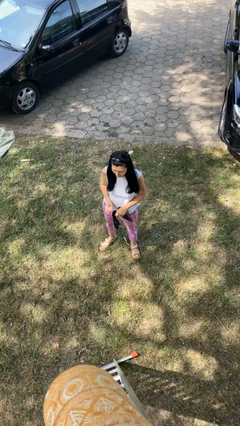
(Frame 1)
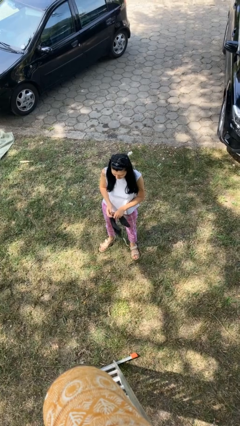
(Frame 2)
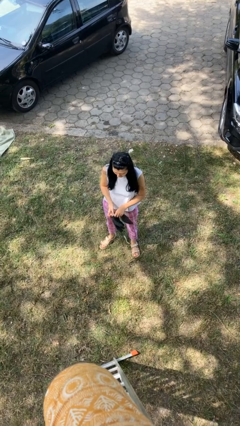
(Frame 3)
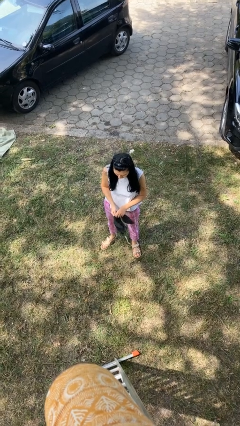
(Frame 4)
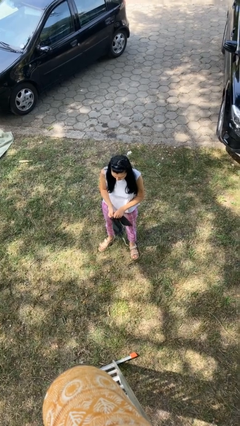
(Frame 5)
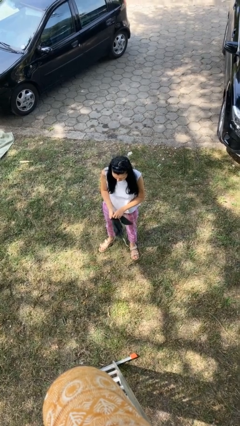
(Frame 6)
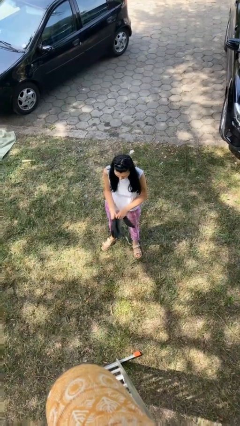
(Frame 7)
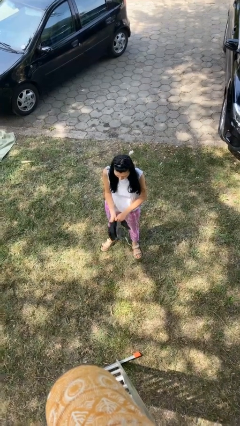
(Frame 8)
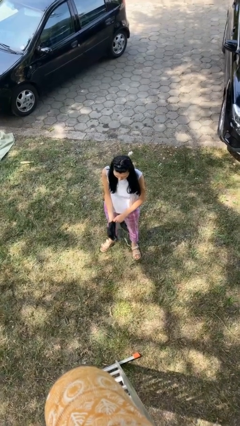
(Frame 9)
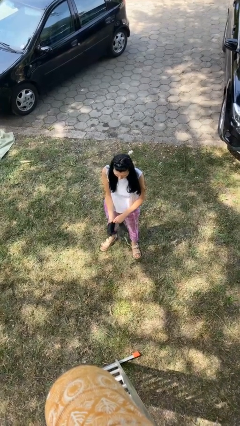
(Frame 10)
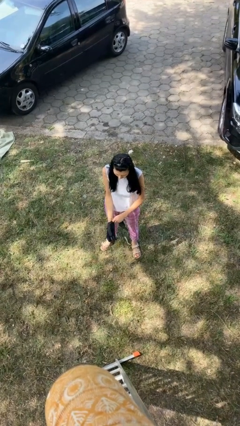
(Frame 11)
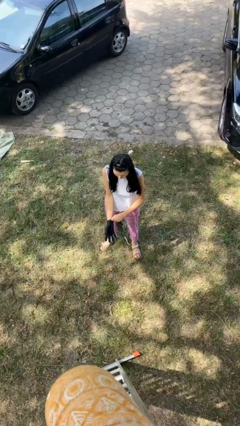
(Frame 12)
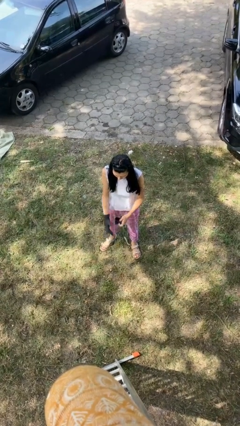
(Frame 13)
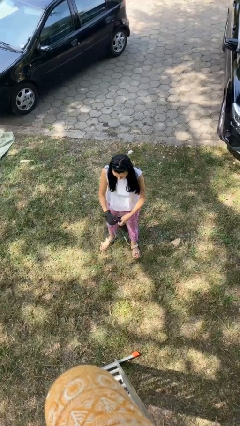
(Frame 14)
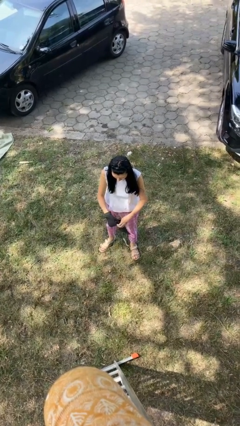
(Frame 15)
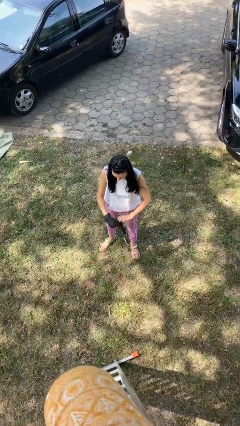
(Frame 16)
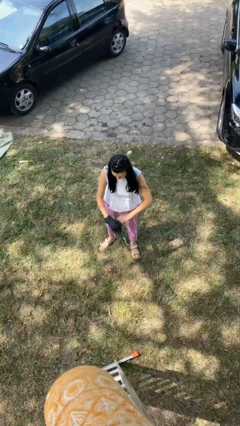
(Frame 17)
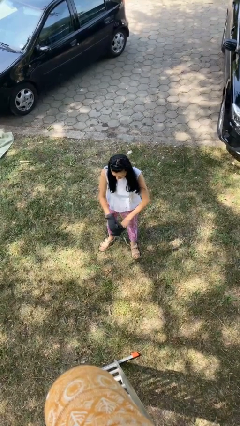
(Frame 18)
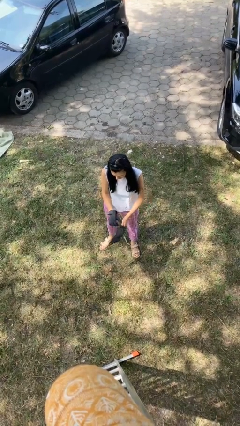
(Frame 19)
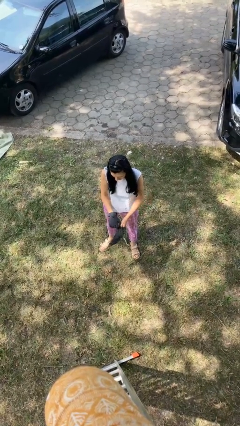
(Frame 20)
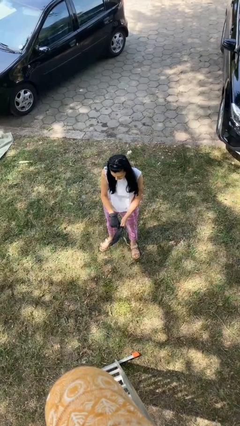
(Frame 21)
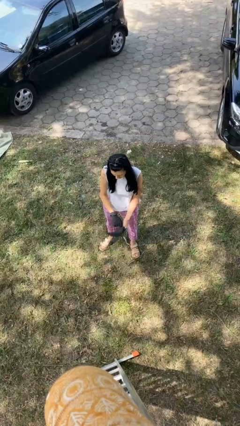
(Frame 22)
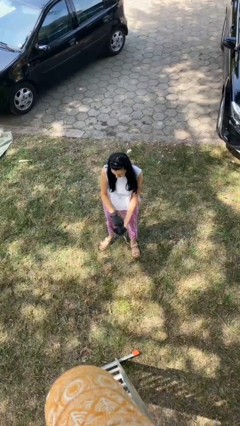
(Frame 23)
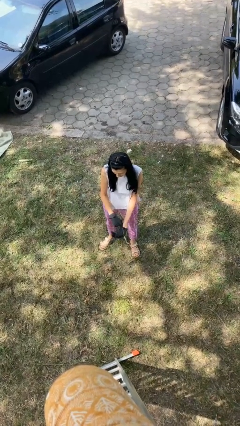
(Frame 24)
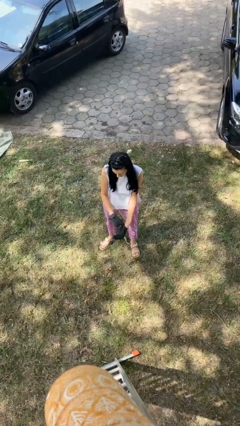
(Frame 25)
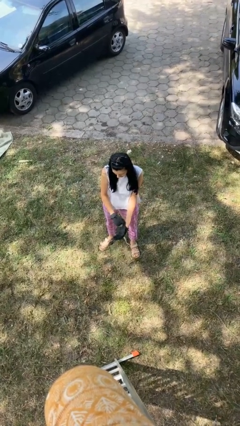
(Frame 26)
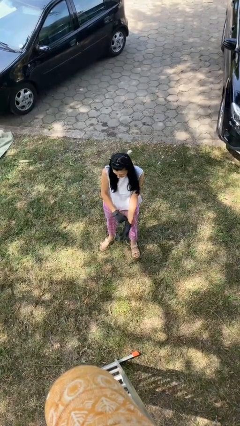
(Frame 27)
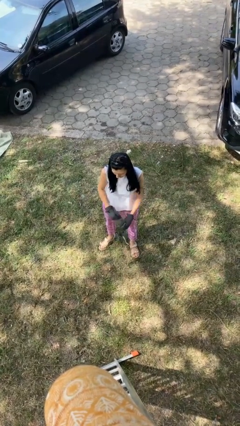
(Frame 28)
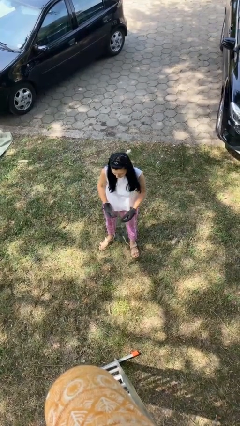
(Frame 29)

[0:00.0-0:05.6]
person puts on gloves

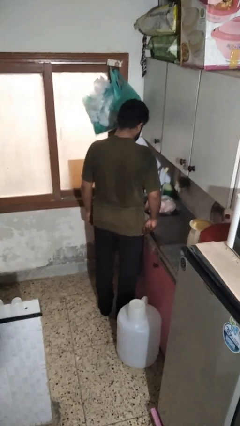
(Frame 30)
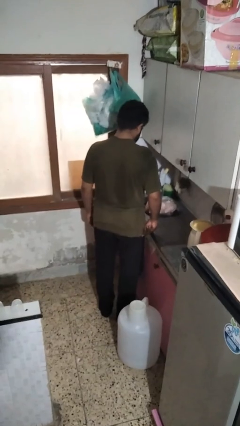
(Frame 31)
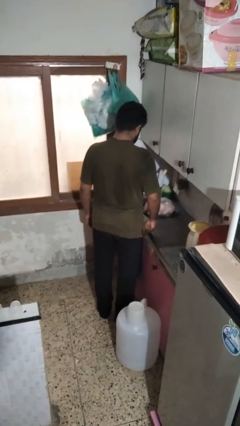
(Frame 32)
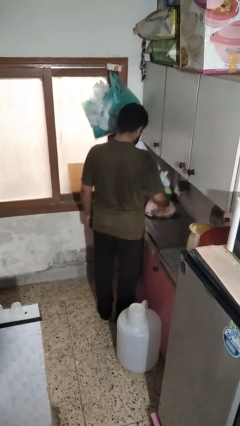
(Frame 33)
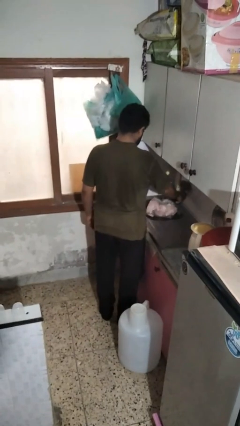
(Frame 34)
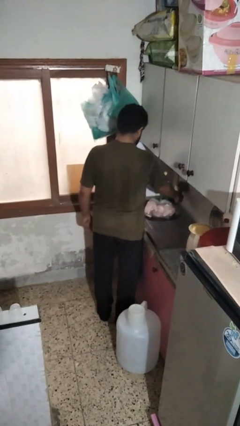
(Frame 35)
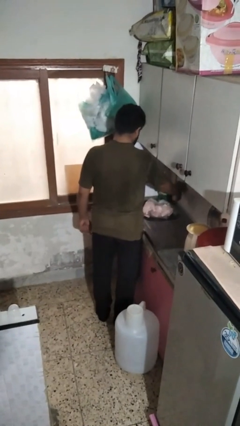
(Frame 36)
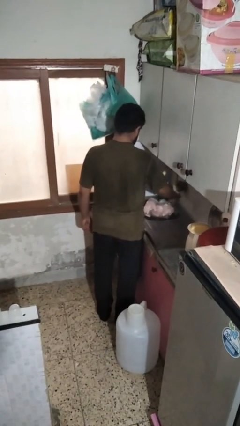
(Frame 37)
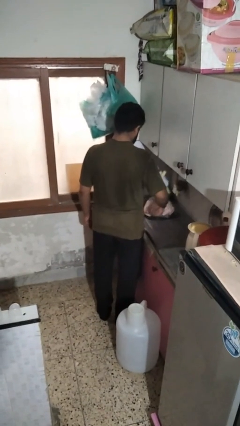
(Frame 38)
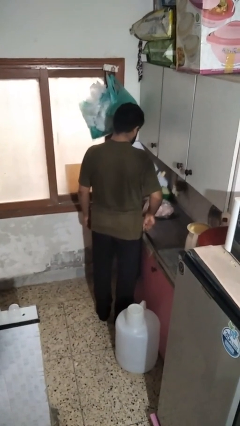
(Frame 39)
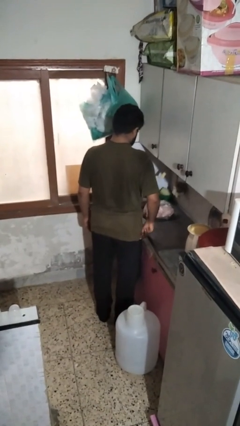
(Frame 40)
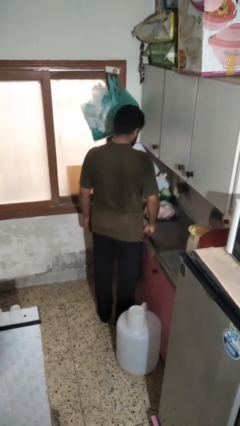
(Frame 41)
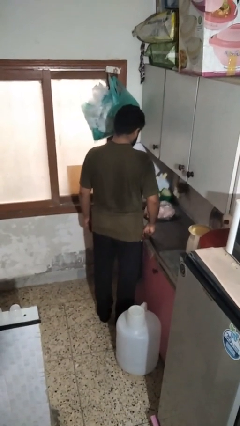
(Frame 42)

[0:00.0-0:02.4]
person turns off faucet

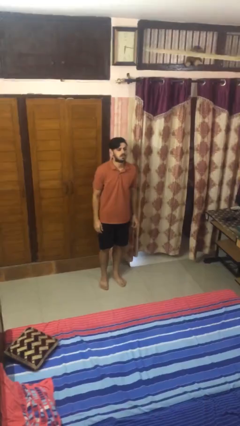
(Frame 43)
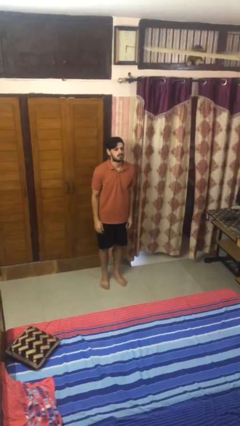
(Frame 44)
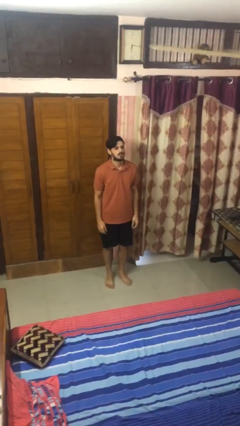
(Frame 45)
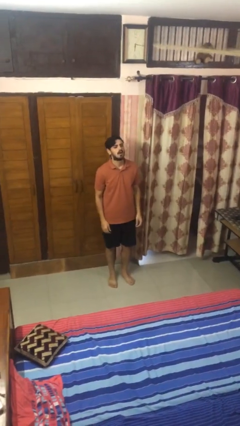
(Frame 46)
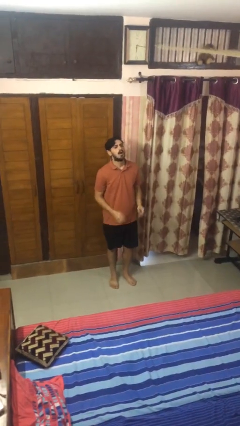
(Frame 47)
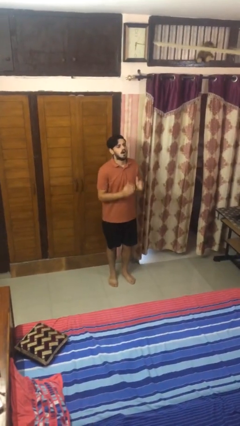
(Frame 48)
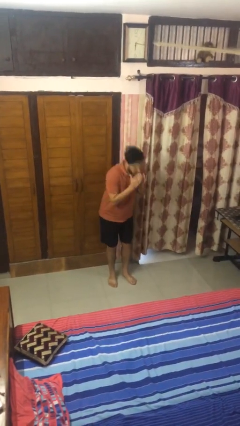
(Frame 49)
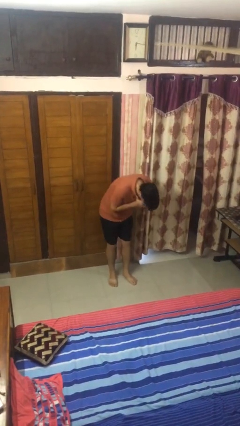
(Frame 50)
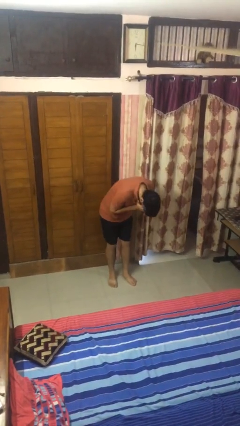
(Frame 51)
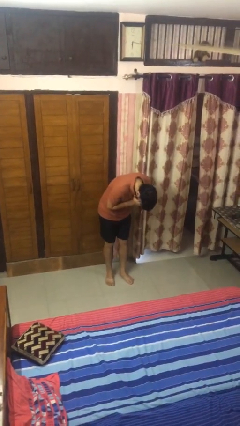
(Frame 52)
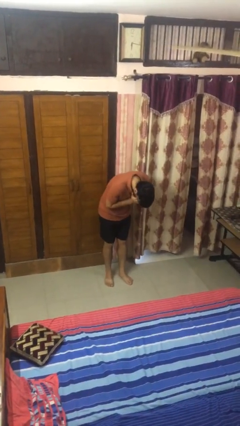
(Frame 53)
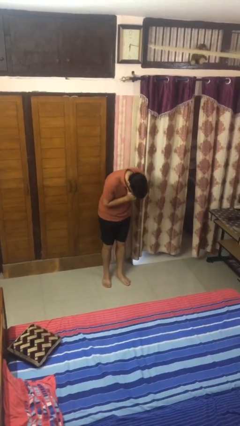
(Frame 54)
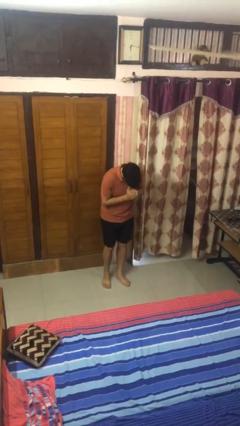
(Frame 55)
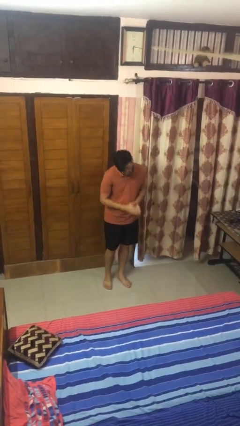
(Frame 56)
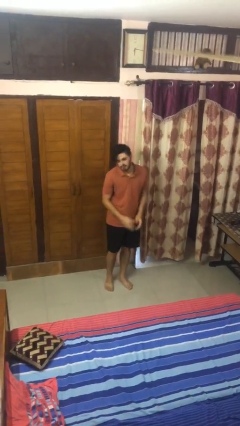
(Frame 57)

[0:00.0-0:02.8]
person sneezes into hand

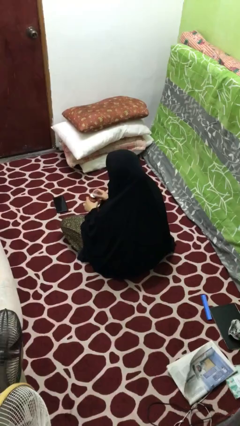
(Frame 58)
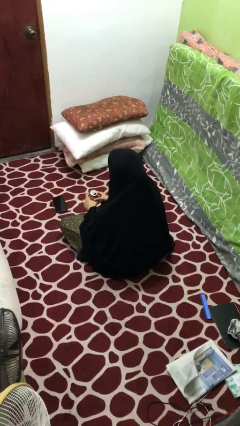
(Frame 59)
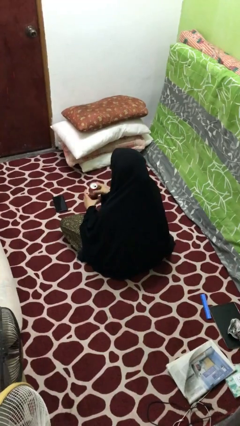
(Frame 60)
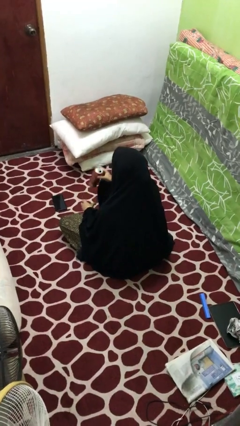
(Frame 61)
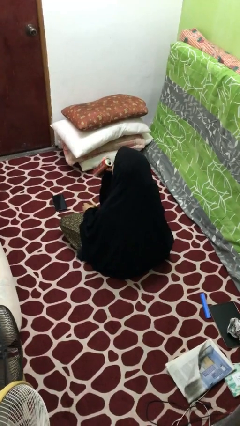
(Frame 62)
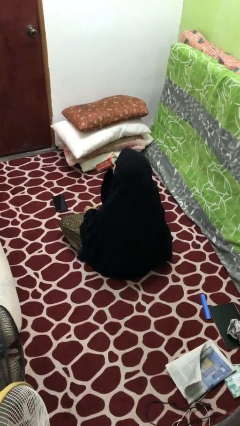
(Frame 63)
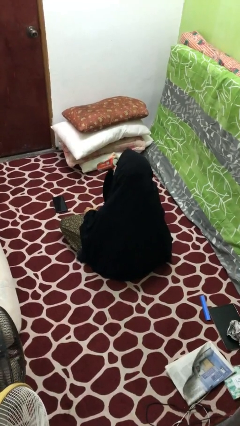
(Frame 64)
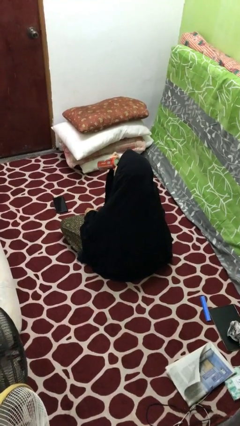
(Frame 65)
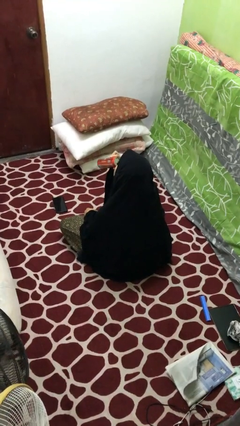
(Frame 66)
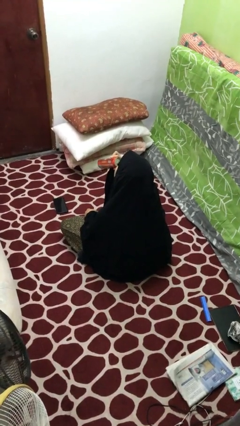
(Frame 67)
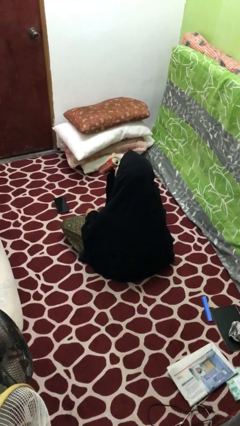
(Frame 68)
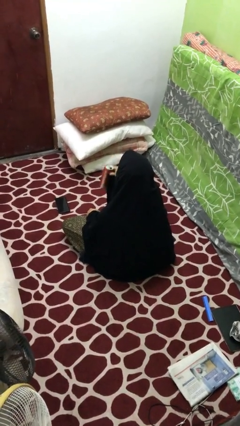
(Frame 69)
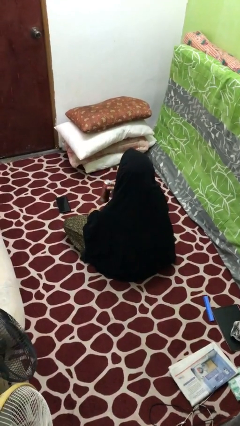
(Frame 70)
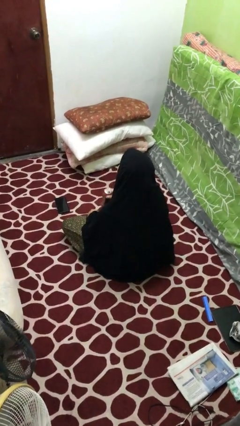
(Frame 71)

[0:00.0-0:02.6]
person drinks from beverage can

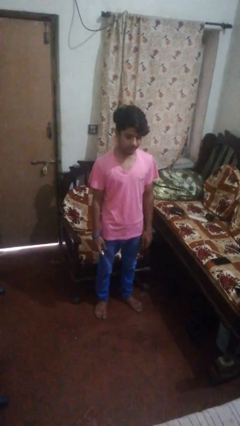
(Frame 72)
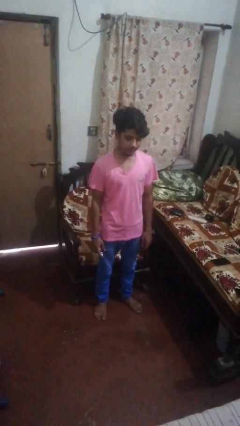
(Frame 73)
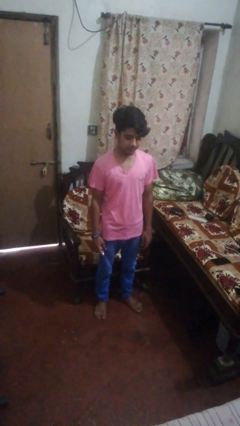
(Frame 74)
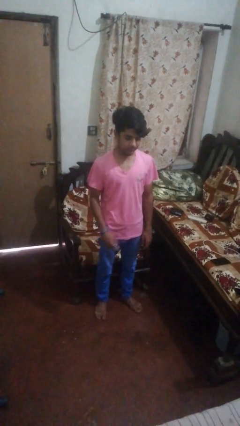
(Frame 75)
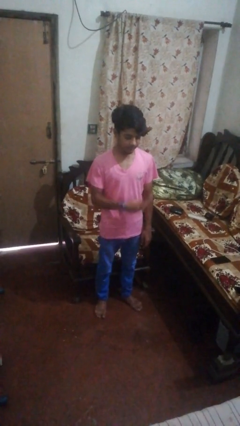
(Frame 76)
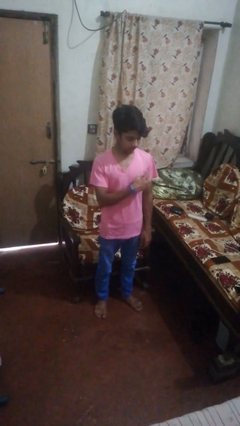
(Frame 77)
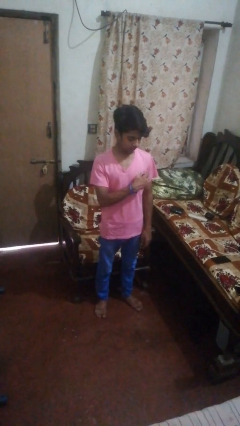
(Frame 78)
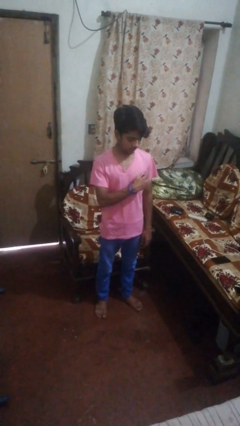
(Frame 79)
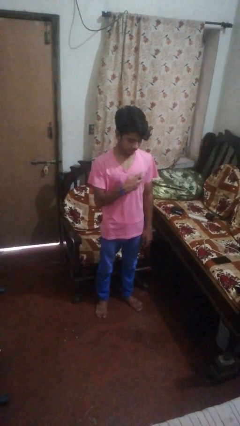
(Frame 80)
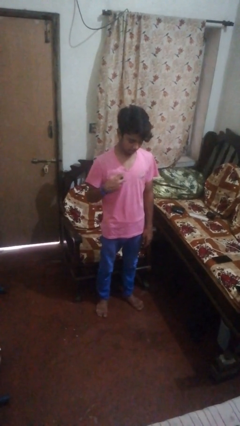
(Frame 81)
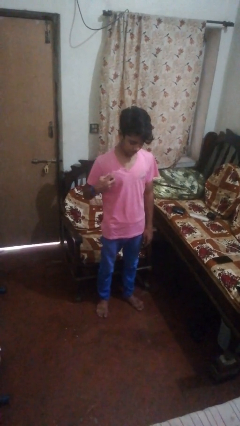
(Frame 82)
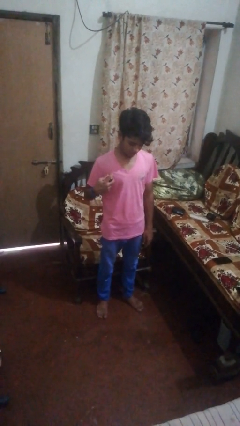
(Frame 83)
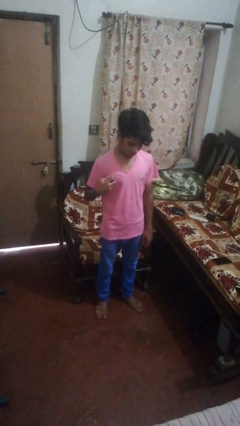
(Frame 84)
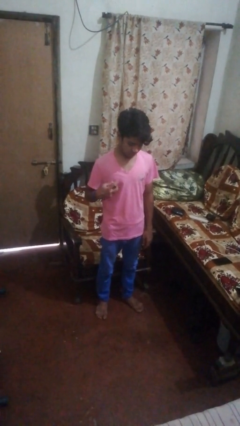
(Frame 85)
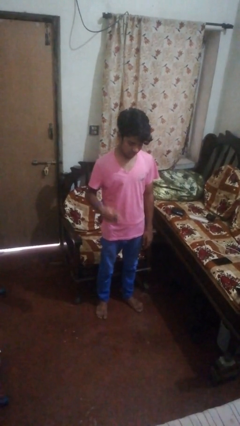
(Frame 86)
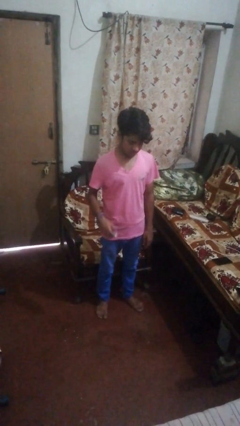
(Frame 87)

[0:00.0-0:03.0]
person applies deodorant

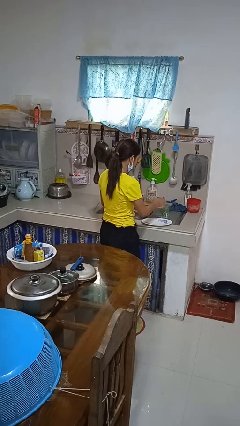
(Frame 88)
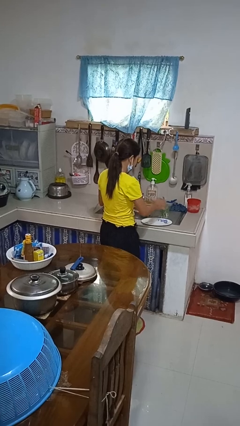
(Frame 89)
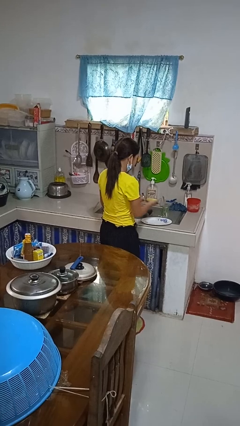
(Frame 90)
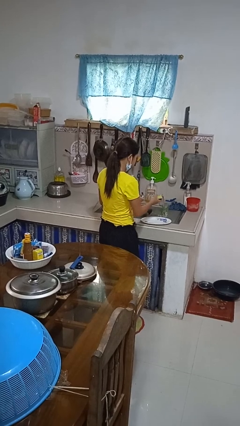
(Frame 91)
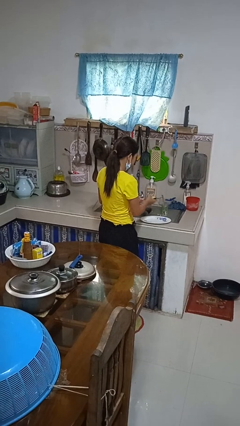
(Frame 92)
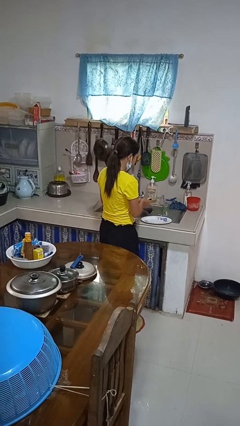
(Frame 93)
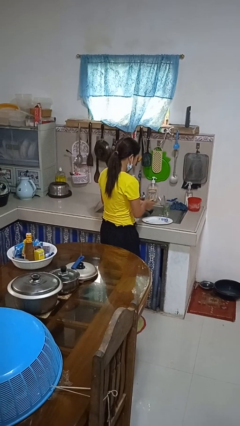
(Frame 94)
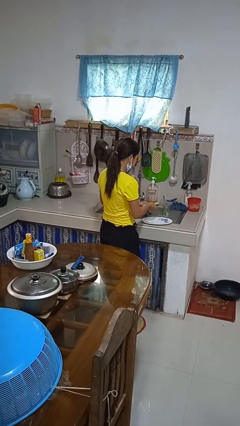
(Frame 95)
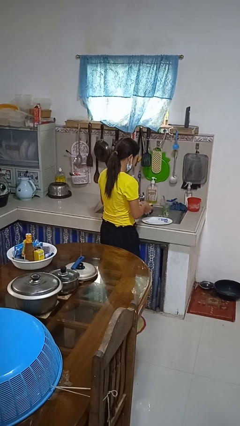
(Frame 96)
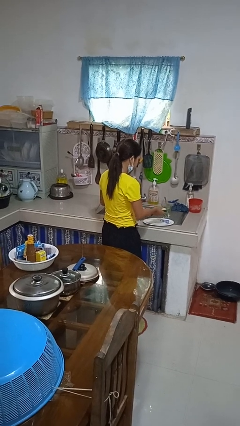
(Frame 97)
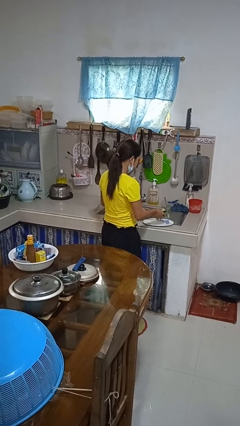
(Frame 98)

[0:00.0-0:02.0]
person washes dish
